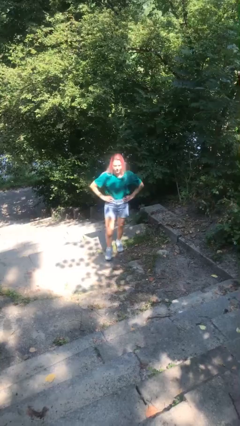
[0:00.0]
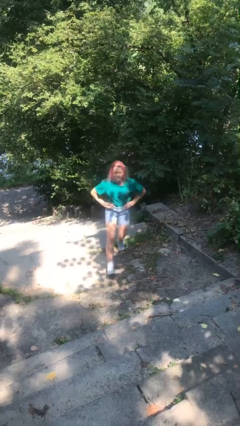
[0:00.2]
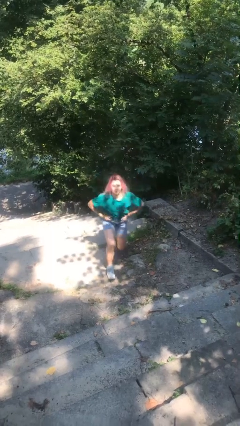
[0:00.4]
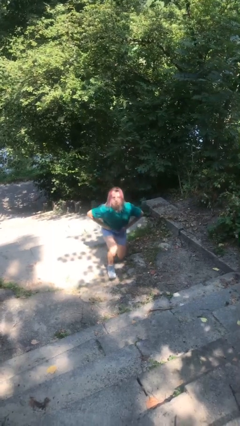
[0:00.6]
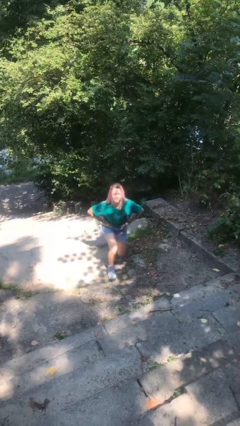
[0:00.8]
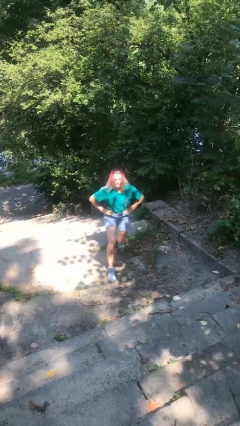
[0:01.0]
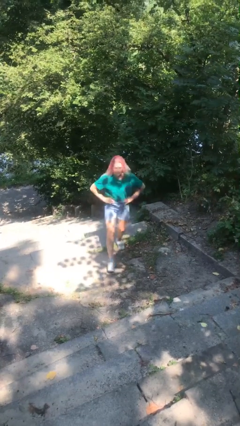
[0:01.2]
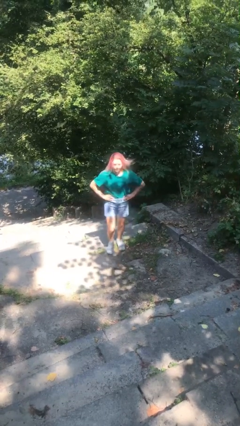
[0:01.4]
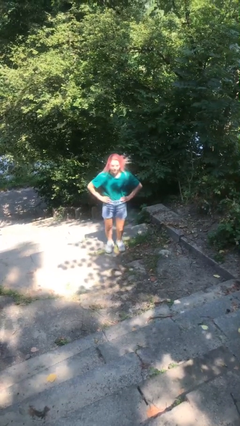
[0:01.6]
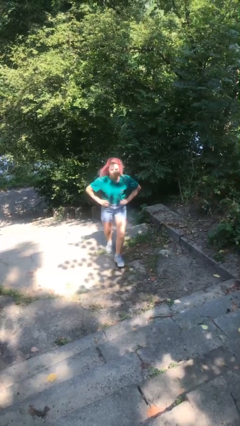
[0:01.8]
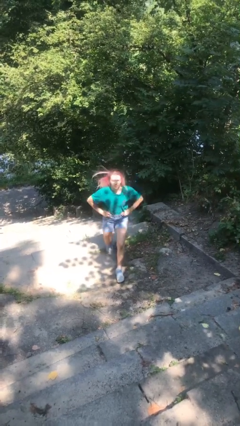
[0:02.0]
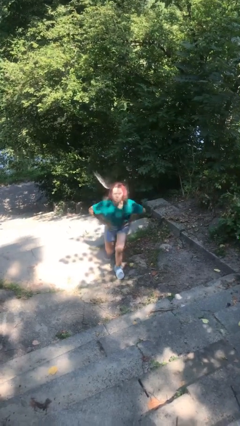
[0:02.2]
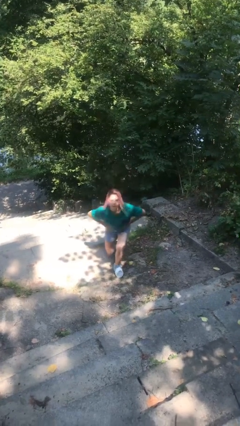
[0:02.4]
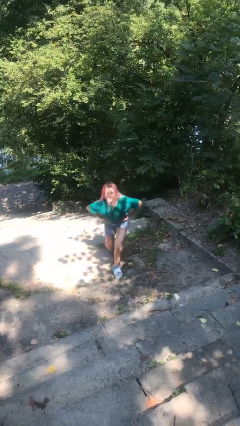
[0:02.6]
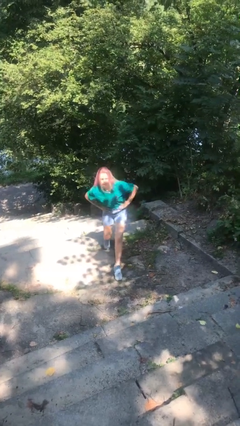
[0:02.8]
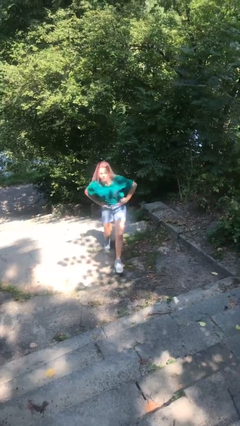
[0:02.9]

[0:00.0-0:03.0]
person exercises with lunges

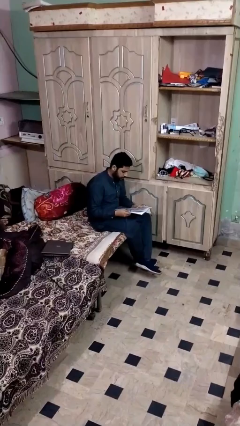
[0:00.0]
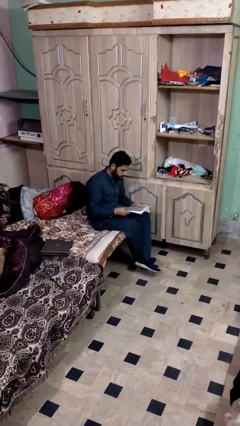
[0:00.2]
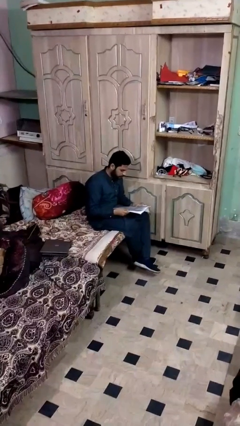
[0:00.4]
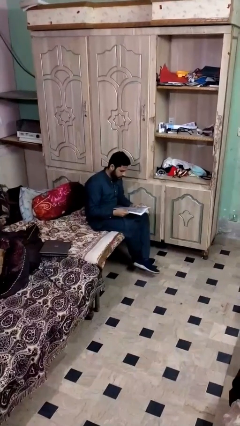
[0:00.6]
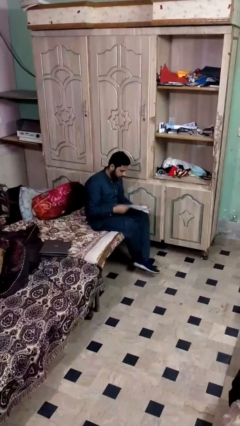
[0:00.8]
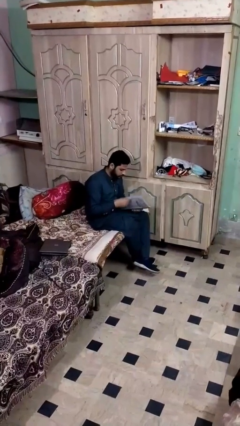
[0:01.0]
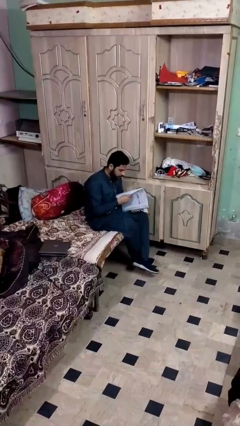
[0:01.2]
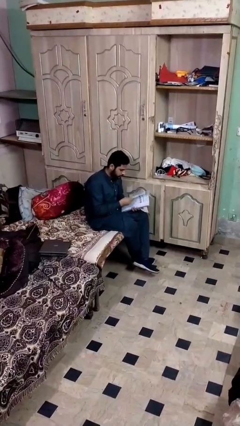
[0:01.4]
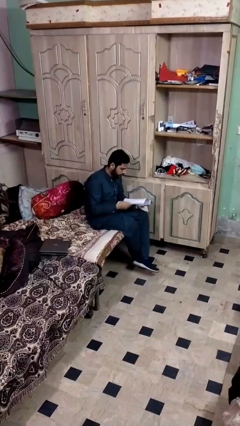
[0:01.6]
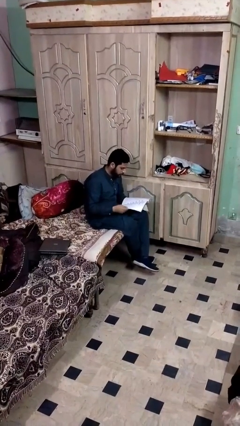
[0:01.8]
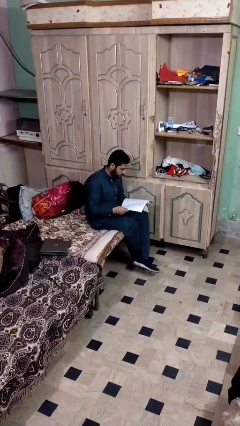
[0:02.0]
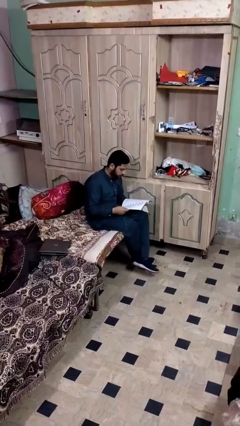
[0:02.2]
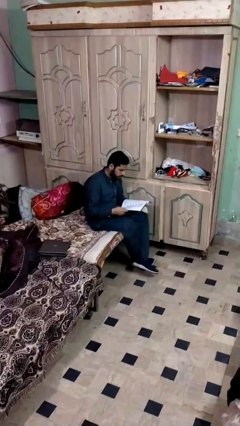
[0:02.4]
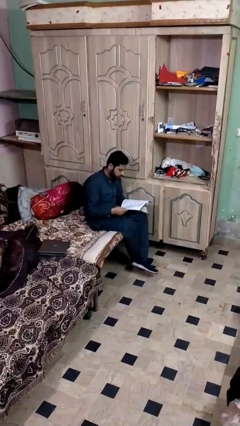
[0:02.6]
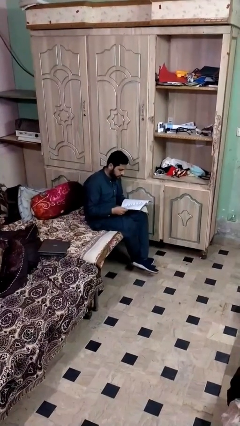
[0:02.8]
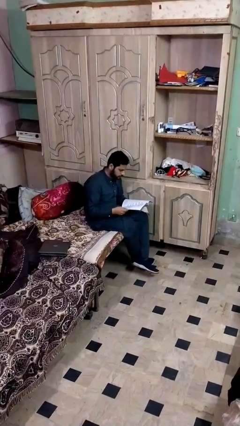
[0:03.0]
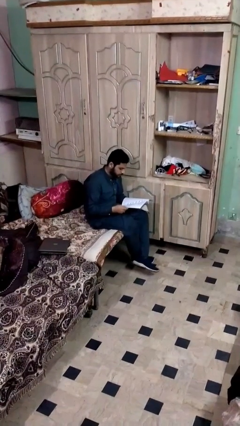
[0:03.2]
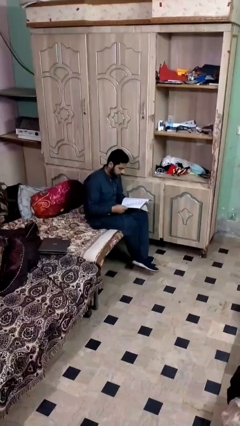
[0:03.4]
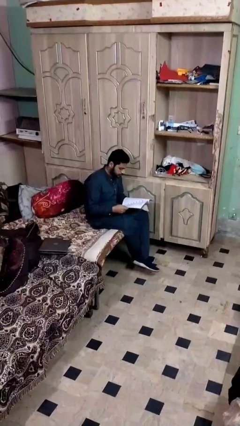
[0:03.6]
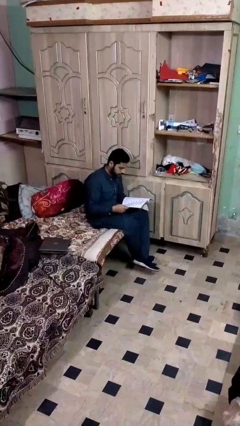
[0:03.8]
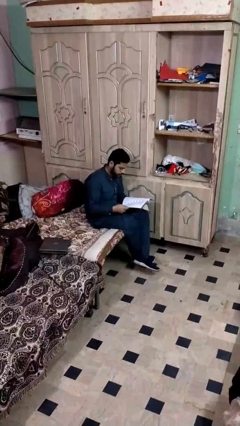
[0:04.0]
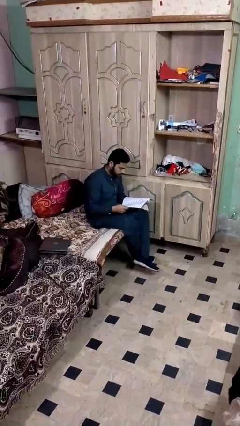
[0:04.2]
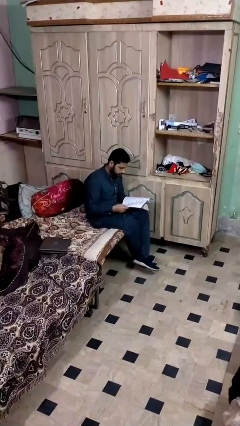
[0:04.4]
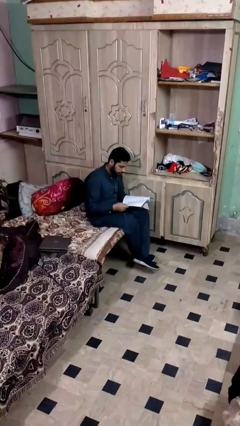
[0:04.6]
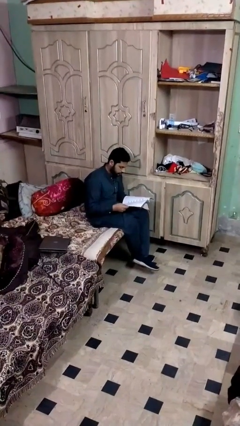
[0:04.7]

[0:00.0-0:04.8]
person reads document

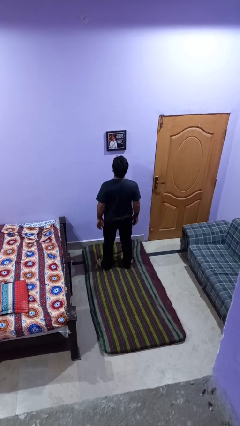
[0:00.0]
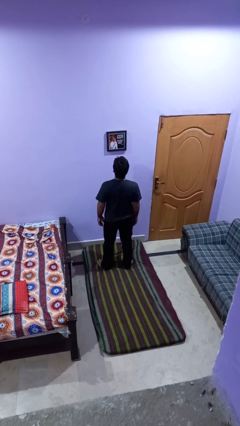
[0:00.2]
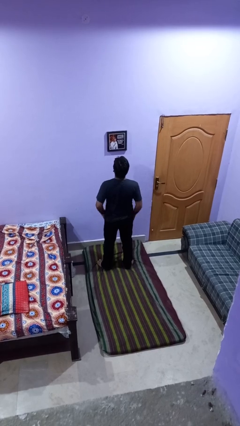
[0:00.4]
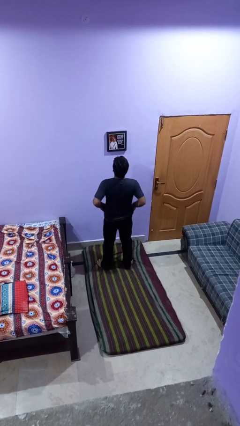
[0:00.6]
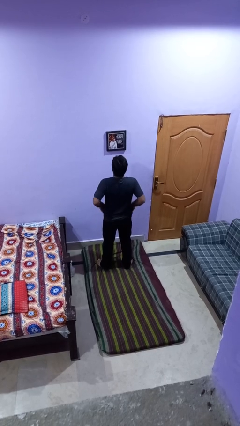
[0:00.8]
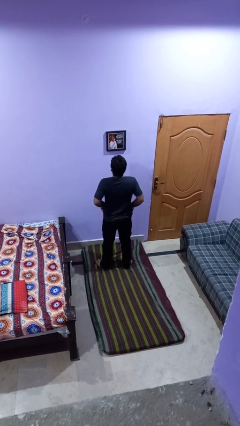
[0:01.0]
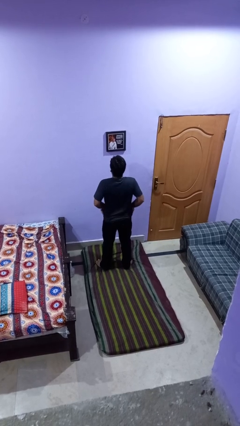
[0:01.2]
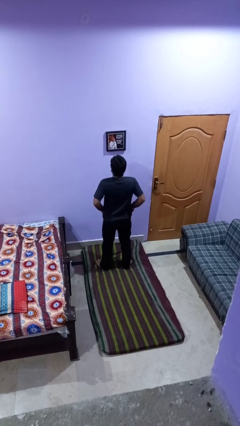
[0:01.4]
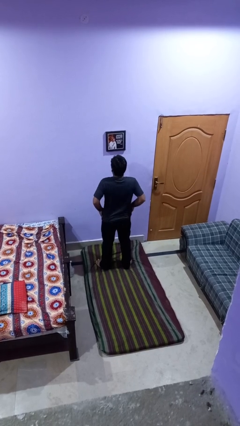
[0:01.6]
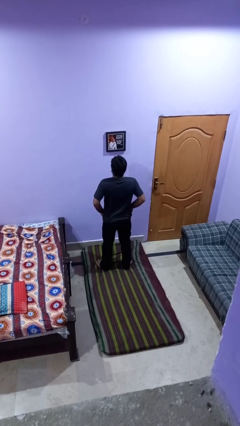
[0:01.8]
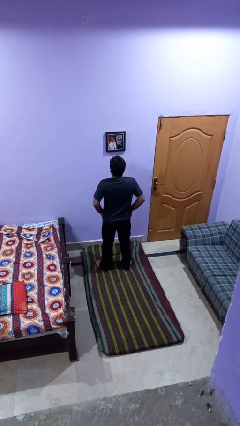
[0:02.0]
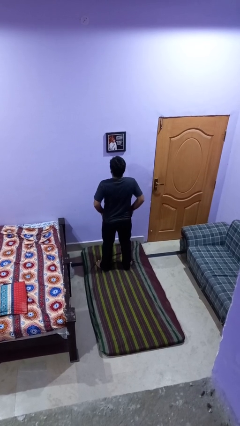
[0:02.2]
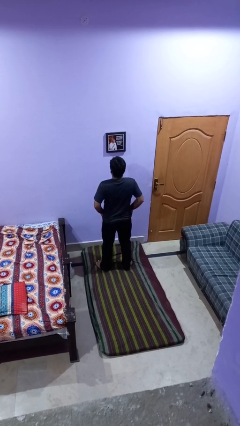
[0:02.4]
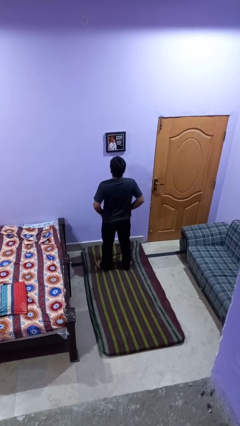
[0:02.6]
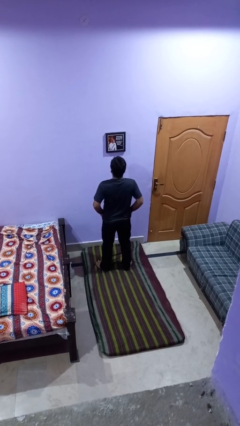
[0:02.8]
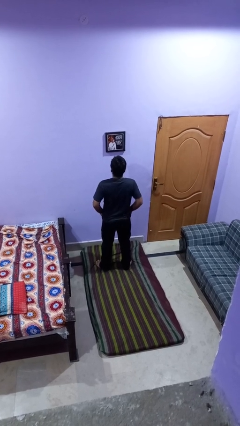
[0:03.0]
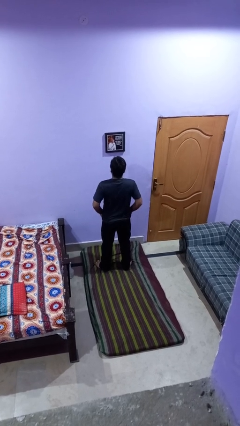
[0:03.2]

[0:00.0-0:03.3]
person puts hands in back pockets

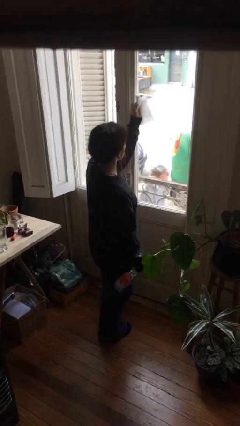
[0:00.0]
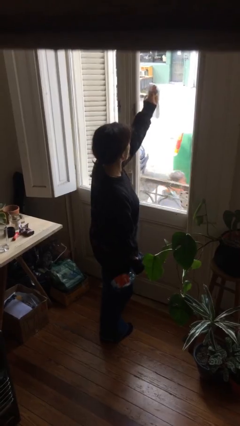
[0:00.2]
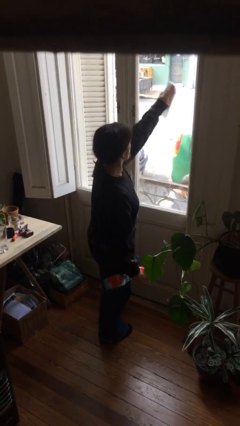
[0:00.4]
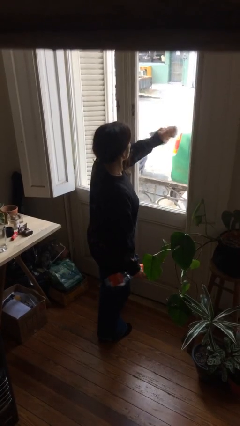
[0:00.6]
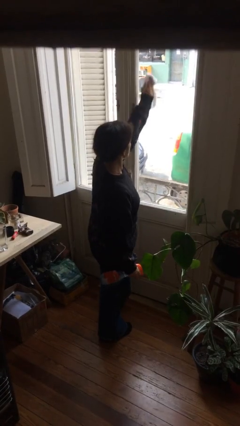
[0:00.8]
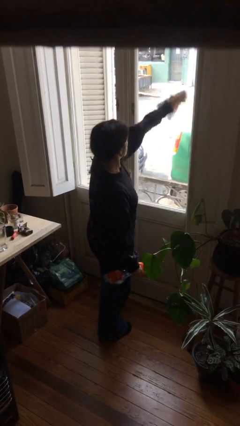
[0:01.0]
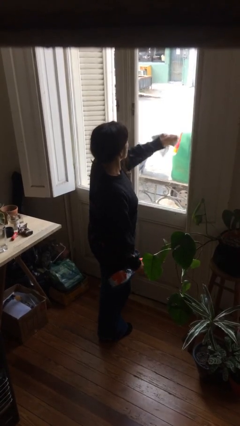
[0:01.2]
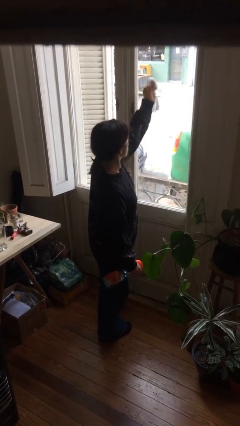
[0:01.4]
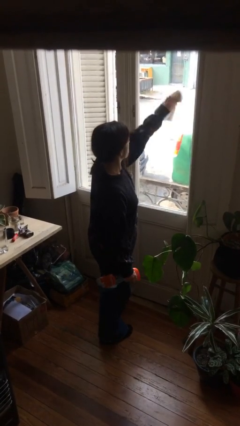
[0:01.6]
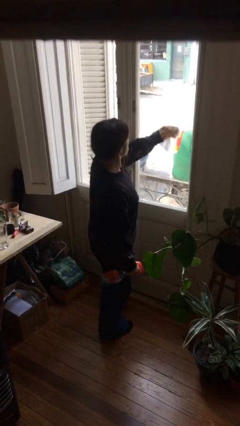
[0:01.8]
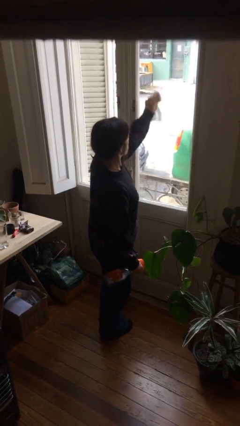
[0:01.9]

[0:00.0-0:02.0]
person washes window

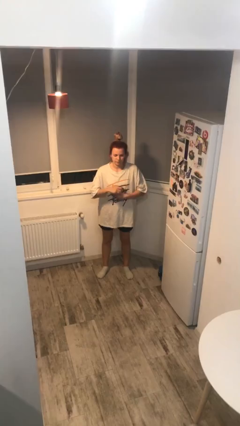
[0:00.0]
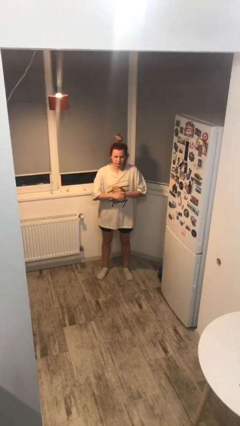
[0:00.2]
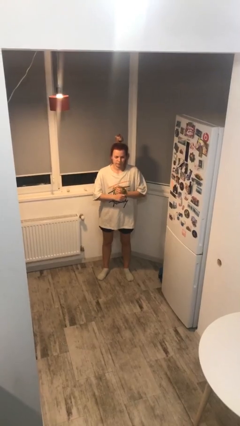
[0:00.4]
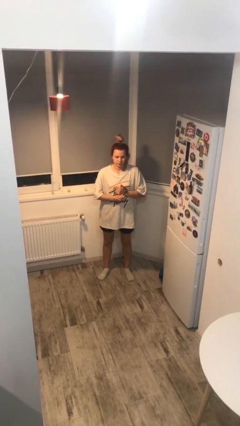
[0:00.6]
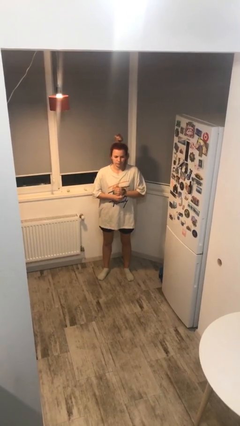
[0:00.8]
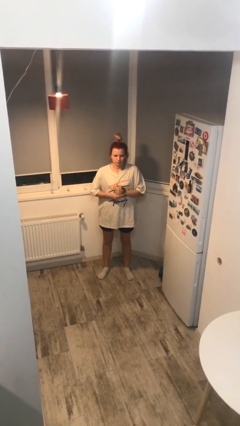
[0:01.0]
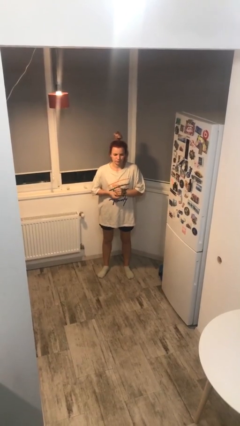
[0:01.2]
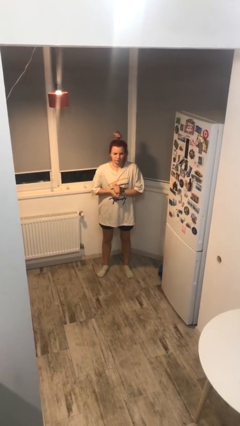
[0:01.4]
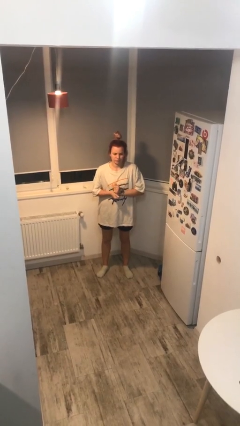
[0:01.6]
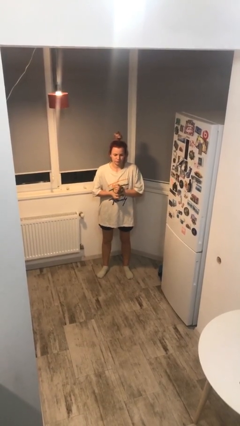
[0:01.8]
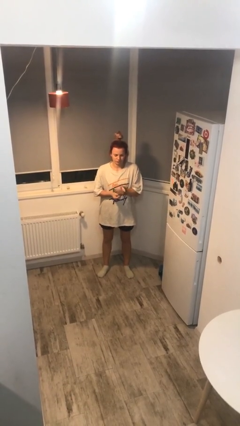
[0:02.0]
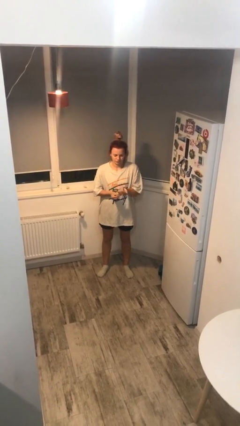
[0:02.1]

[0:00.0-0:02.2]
person puts on wristwatch

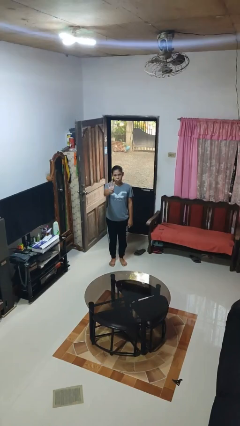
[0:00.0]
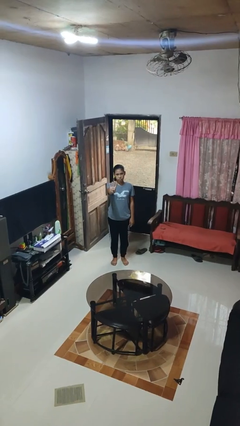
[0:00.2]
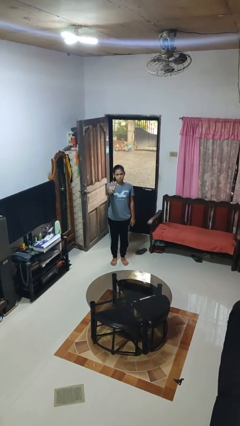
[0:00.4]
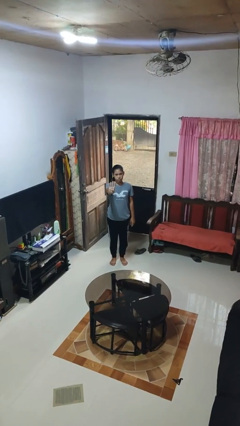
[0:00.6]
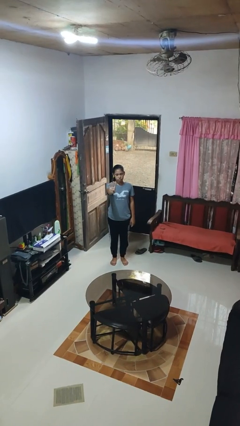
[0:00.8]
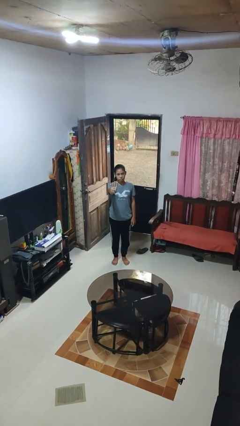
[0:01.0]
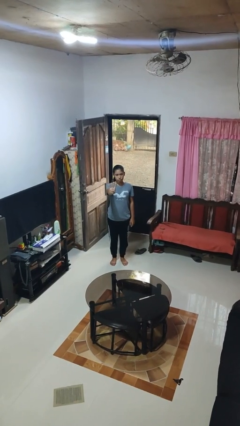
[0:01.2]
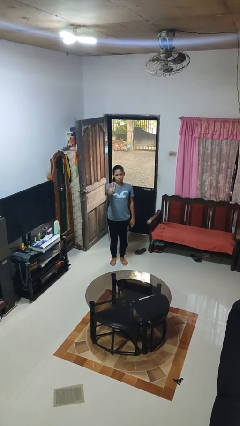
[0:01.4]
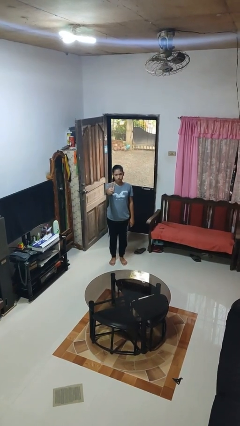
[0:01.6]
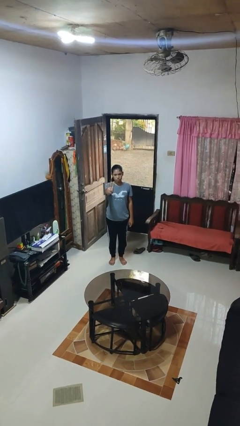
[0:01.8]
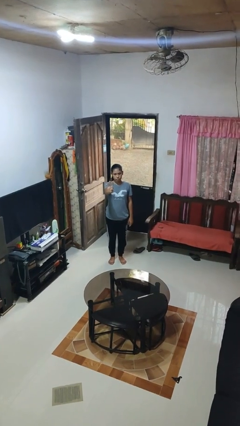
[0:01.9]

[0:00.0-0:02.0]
person gestures number four

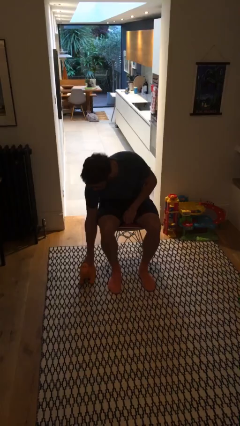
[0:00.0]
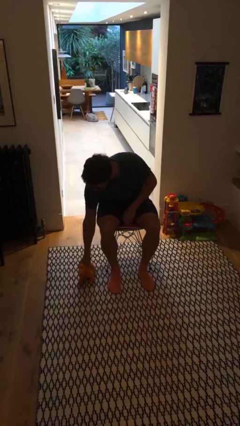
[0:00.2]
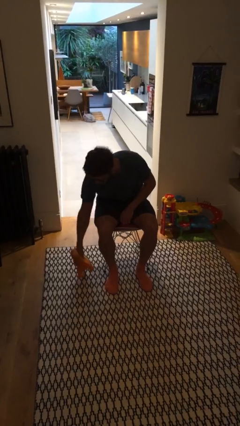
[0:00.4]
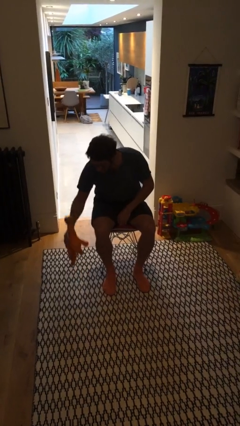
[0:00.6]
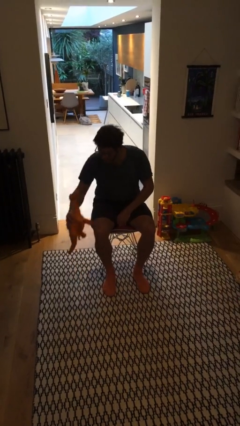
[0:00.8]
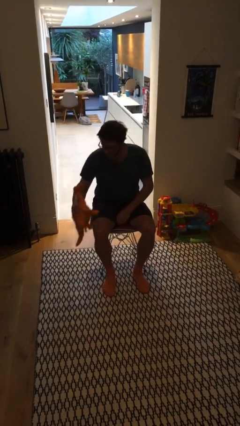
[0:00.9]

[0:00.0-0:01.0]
person picks up object from floor
